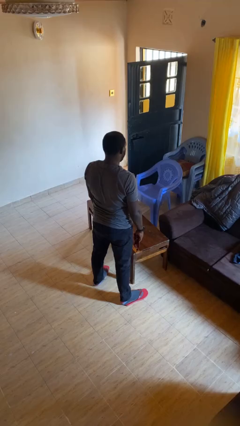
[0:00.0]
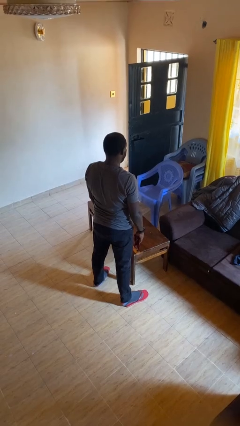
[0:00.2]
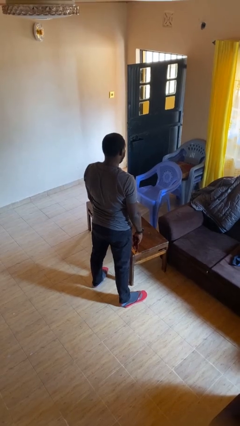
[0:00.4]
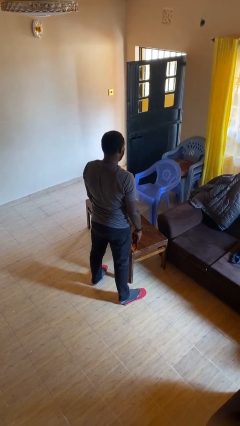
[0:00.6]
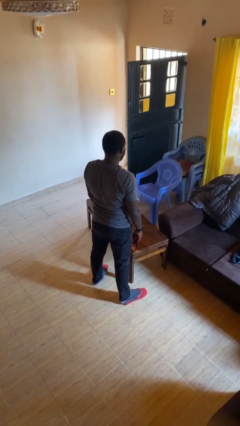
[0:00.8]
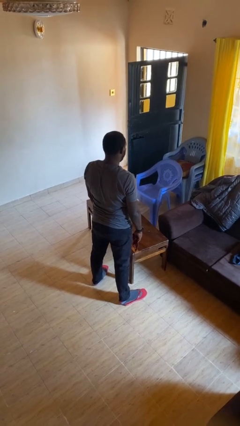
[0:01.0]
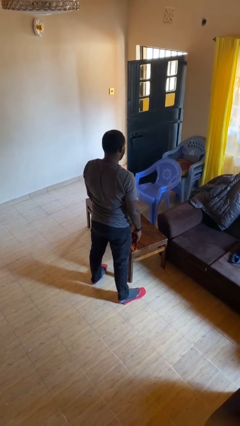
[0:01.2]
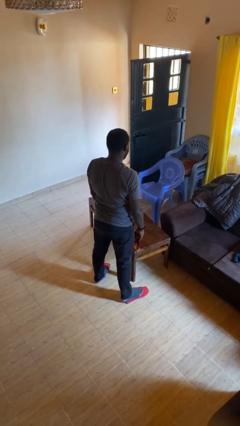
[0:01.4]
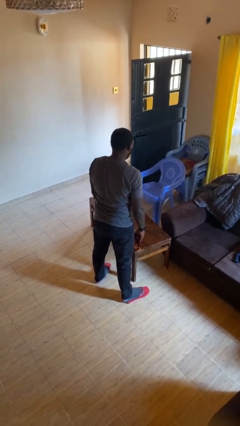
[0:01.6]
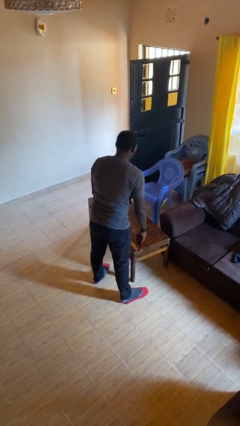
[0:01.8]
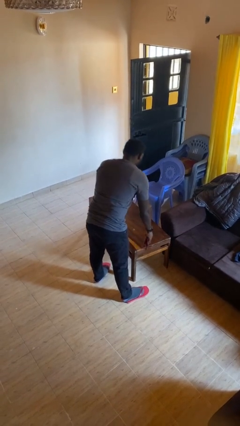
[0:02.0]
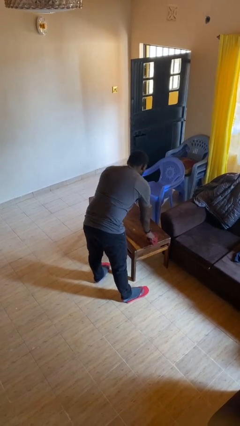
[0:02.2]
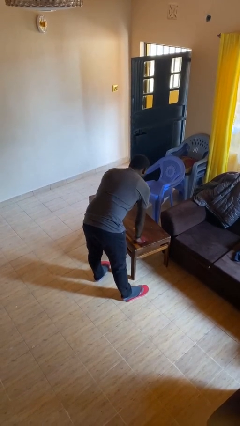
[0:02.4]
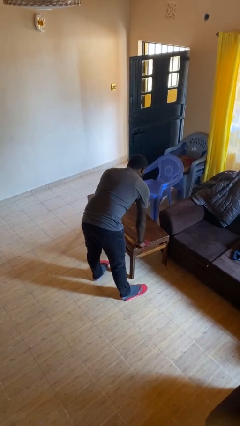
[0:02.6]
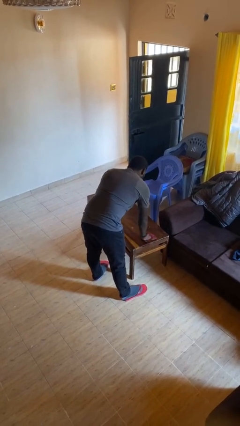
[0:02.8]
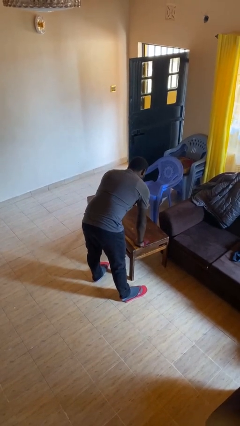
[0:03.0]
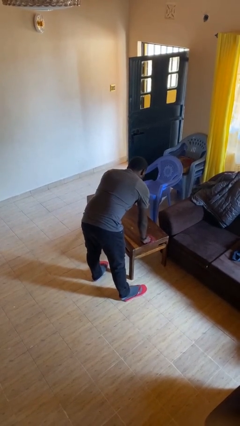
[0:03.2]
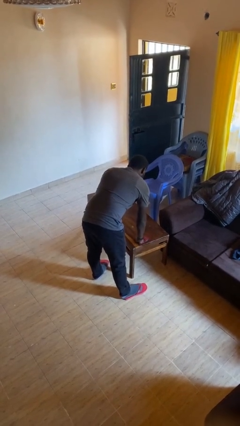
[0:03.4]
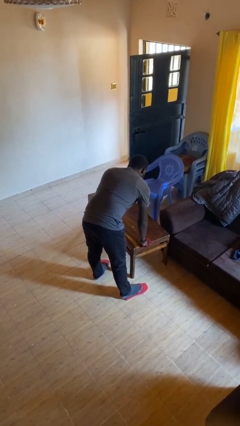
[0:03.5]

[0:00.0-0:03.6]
person cleans table with rag

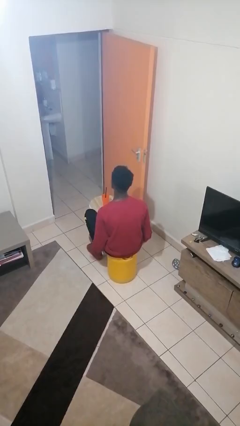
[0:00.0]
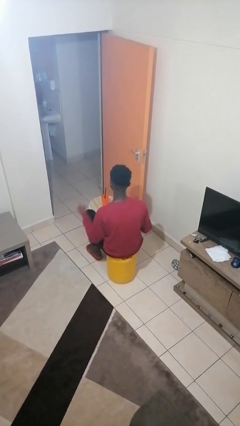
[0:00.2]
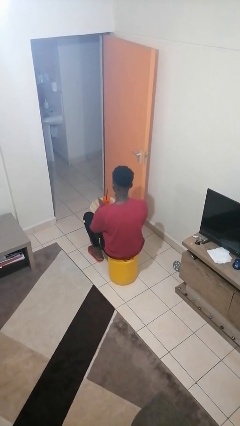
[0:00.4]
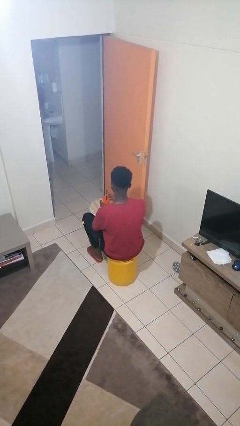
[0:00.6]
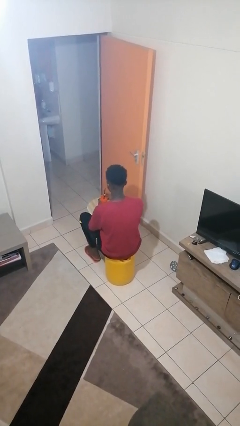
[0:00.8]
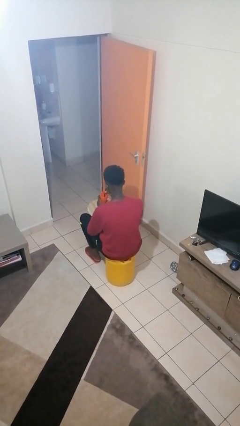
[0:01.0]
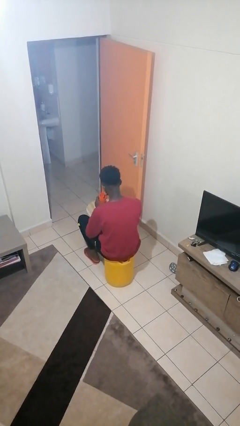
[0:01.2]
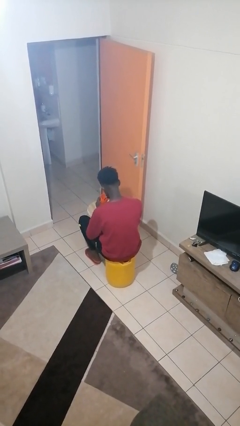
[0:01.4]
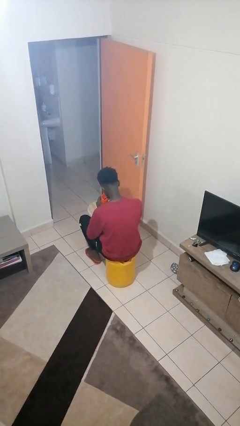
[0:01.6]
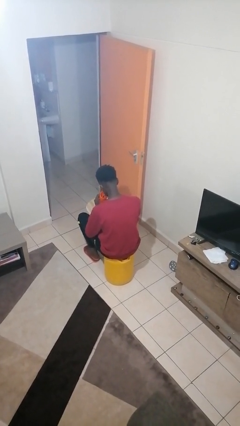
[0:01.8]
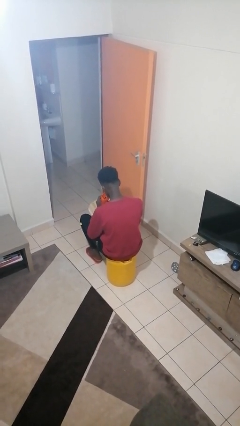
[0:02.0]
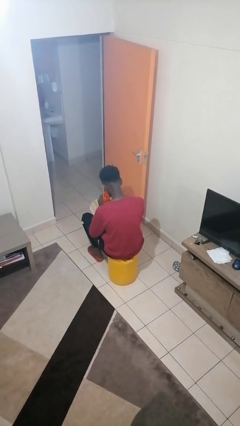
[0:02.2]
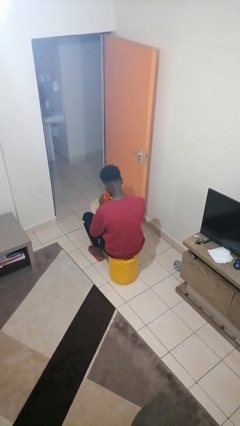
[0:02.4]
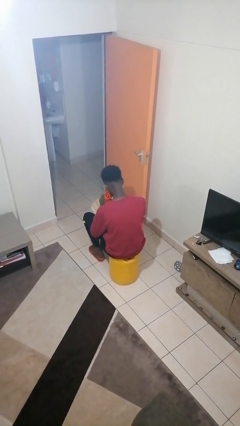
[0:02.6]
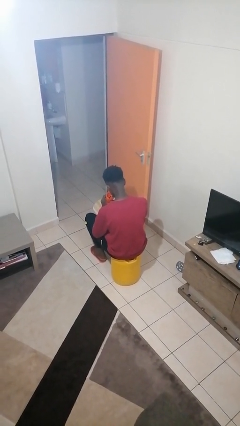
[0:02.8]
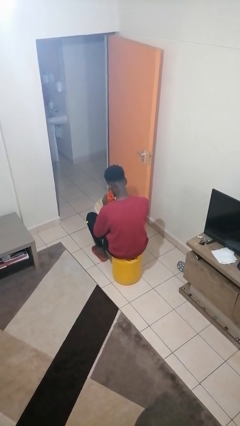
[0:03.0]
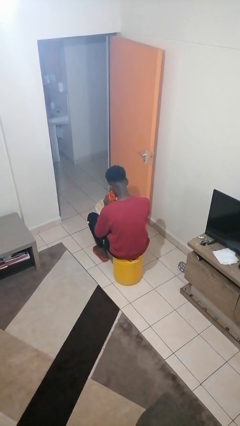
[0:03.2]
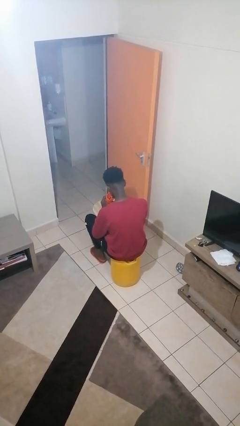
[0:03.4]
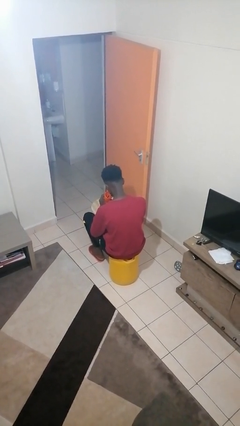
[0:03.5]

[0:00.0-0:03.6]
person drinks from straw

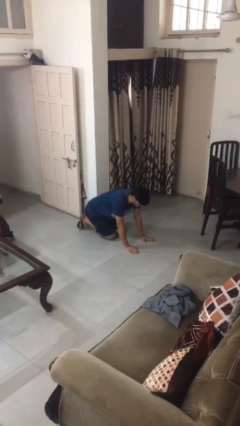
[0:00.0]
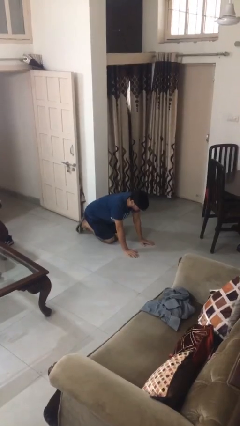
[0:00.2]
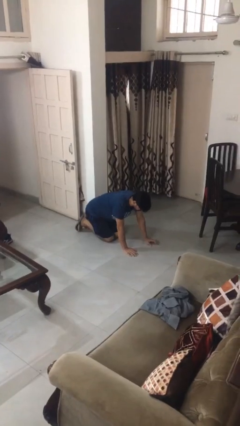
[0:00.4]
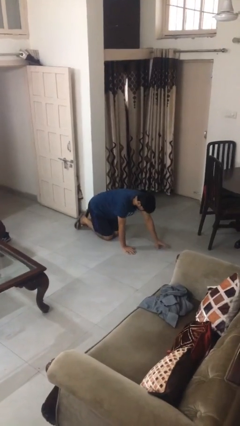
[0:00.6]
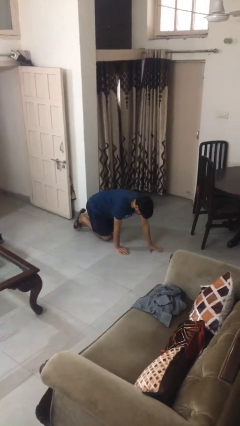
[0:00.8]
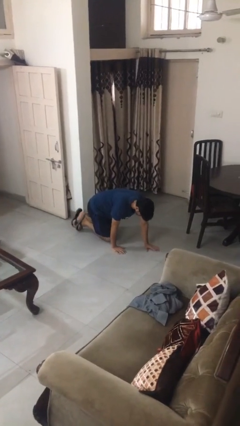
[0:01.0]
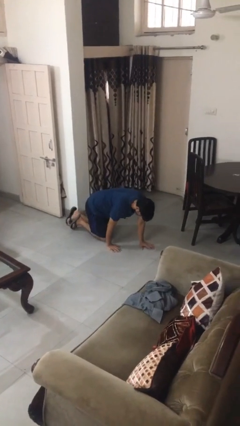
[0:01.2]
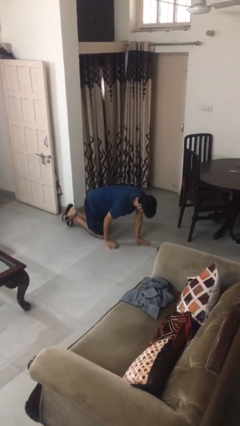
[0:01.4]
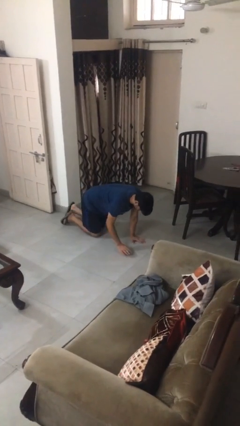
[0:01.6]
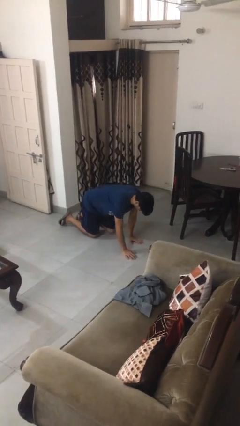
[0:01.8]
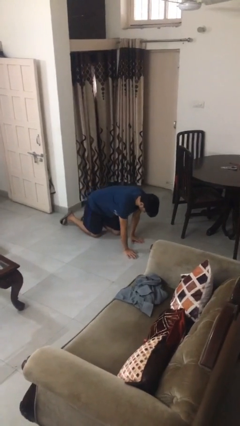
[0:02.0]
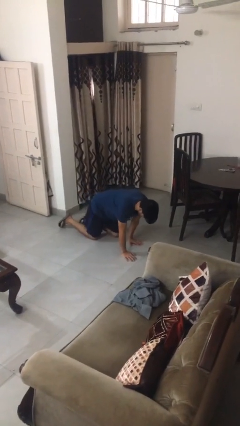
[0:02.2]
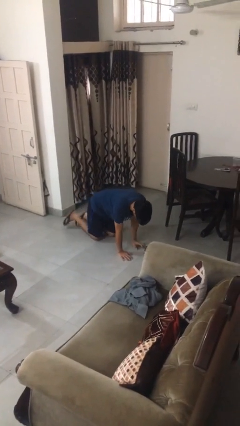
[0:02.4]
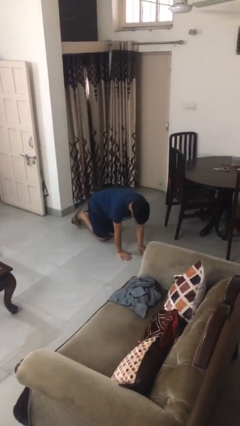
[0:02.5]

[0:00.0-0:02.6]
person crawls

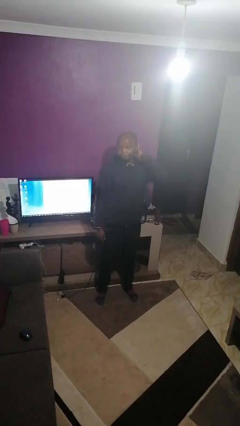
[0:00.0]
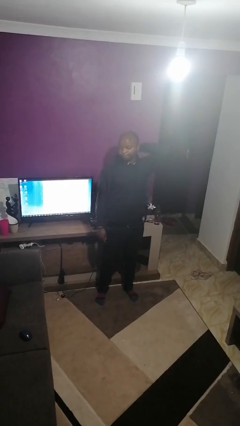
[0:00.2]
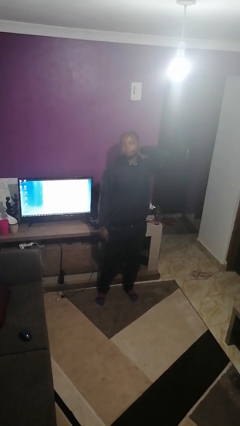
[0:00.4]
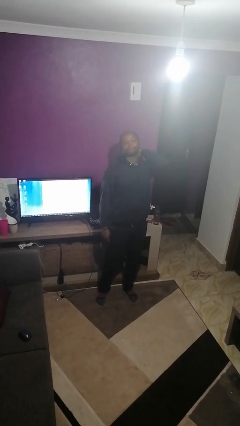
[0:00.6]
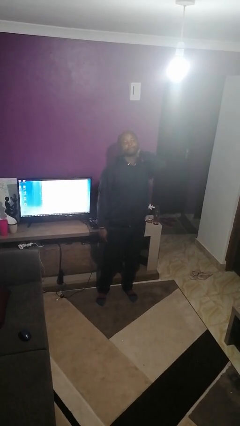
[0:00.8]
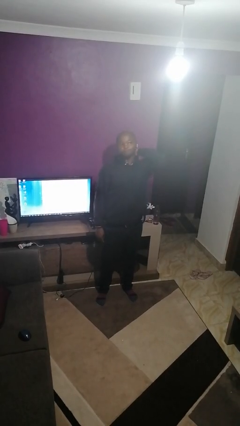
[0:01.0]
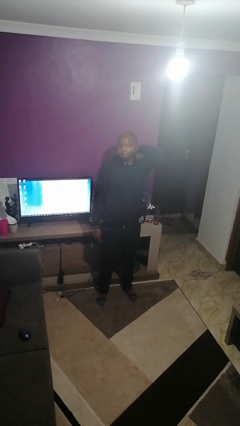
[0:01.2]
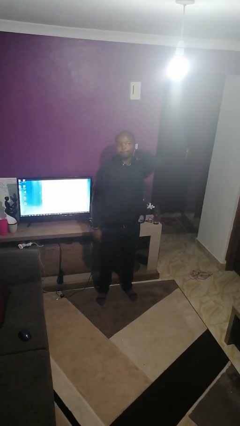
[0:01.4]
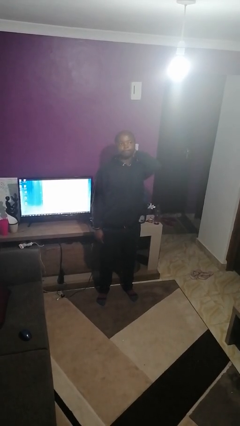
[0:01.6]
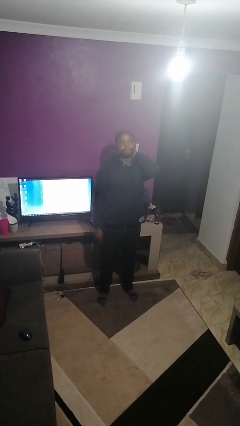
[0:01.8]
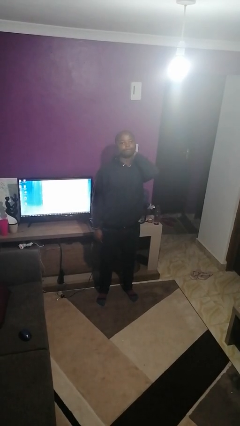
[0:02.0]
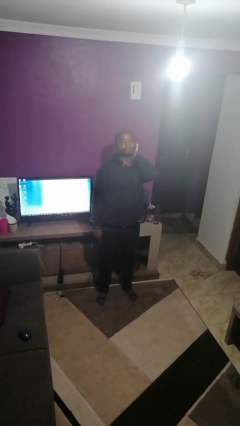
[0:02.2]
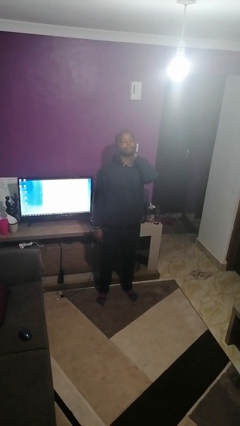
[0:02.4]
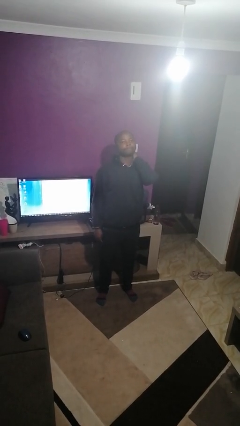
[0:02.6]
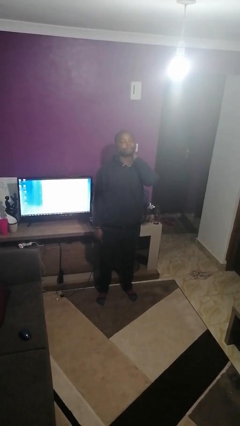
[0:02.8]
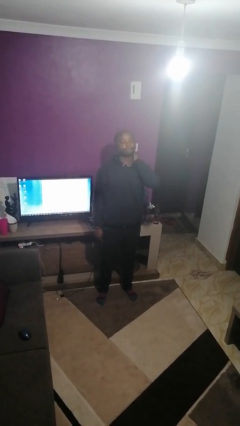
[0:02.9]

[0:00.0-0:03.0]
person rubs neck

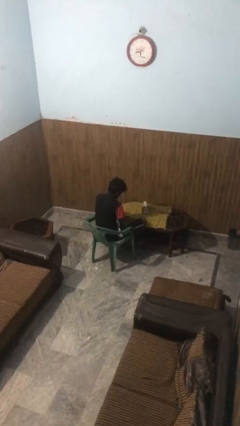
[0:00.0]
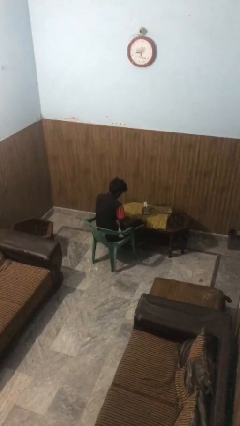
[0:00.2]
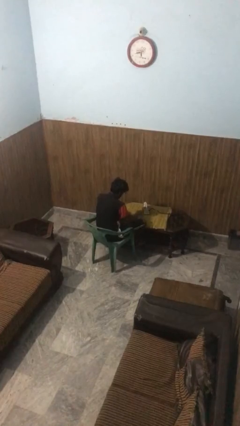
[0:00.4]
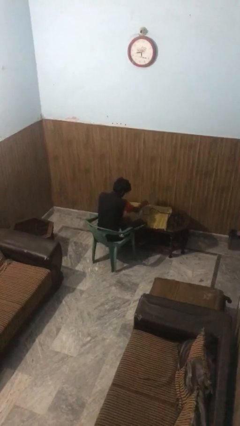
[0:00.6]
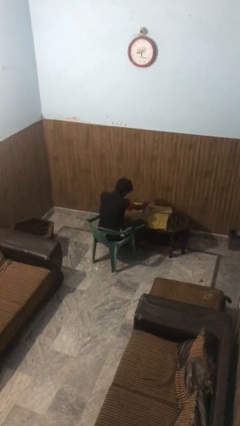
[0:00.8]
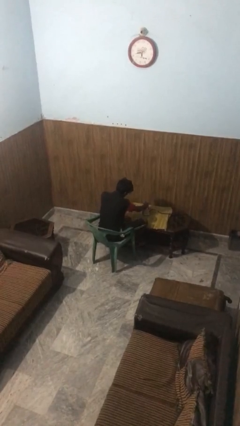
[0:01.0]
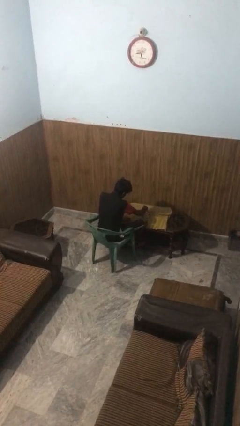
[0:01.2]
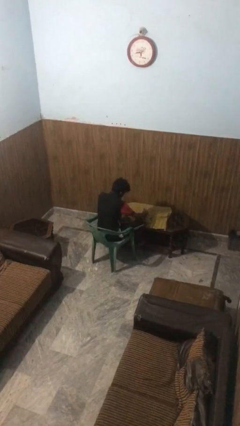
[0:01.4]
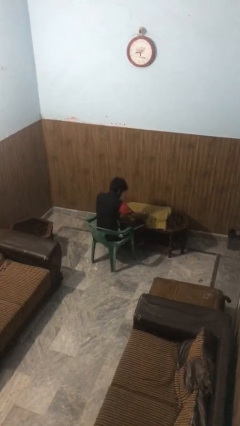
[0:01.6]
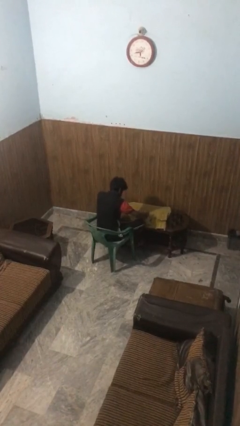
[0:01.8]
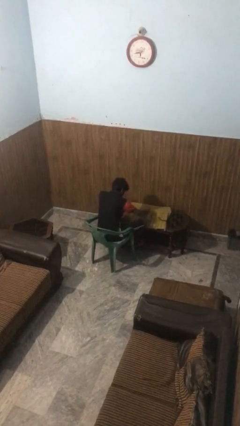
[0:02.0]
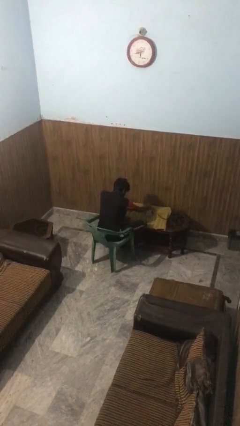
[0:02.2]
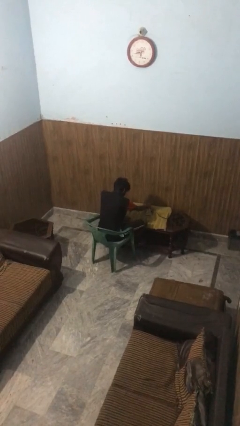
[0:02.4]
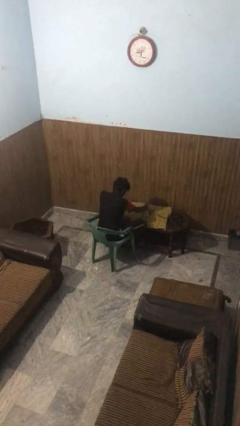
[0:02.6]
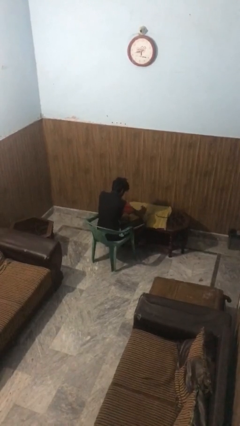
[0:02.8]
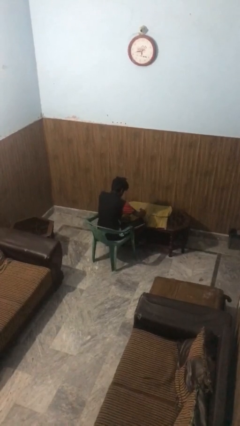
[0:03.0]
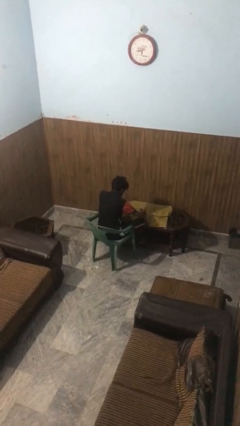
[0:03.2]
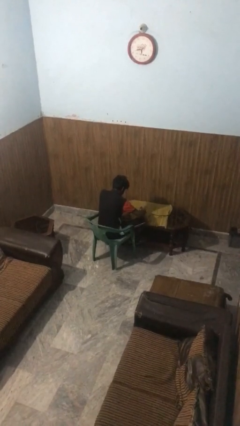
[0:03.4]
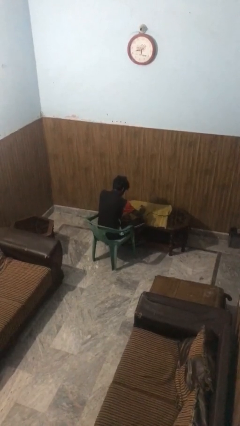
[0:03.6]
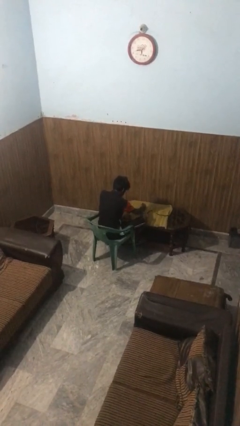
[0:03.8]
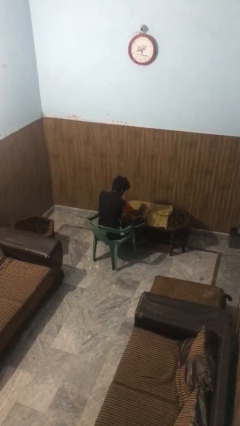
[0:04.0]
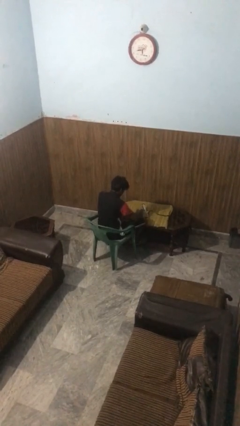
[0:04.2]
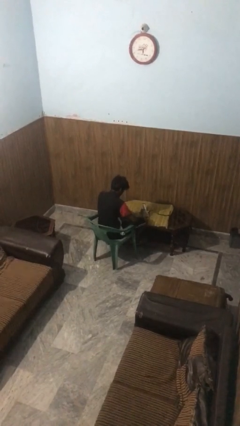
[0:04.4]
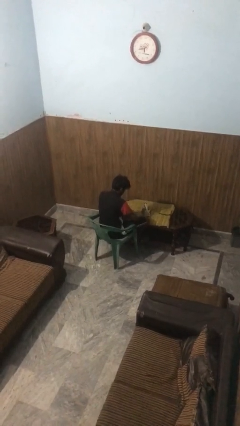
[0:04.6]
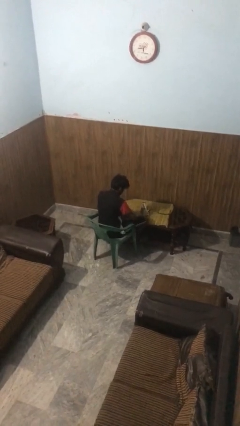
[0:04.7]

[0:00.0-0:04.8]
person irons clothes
